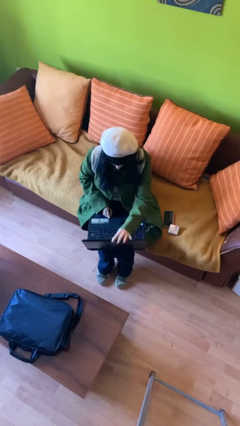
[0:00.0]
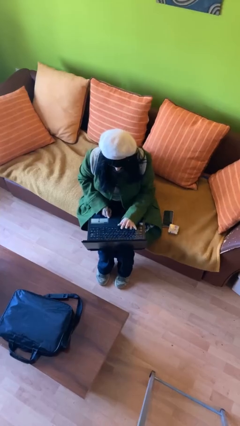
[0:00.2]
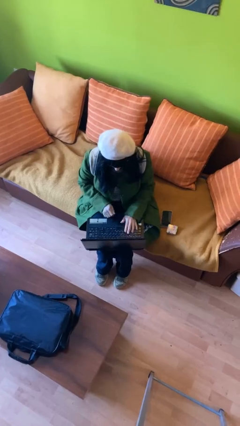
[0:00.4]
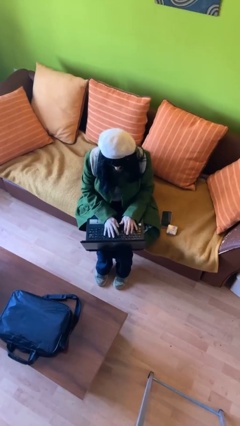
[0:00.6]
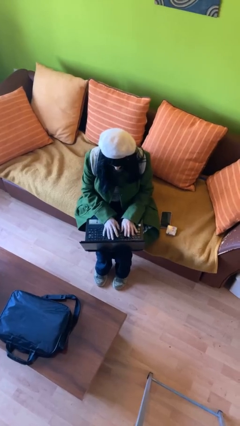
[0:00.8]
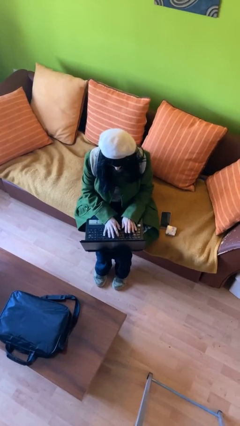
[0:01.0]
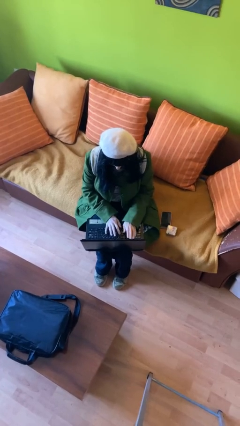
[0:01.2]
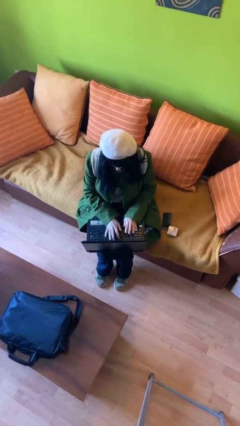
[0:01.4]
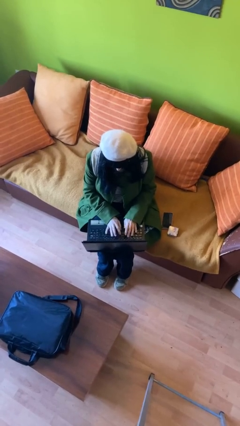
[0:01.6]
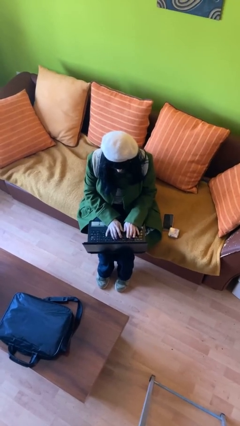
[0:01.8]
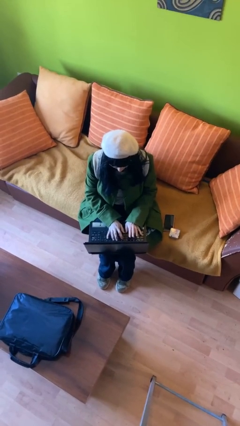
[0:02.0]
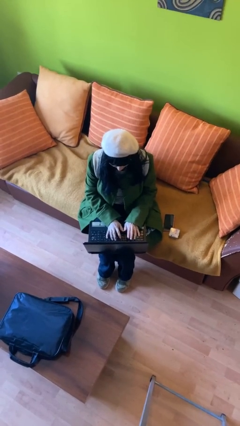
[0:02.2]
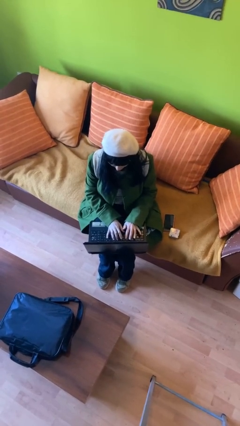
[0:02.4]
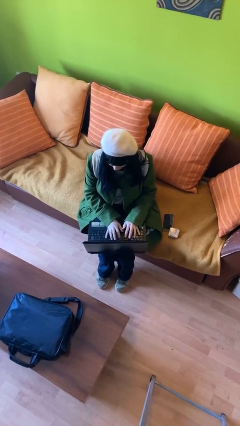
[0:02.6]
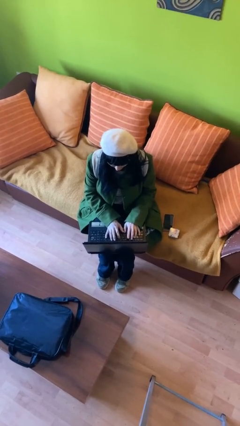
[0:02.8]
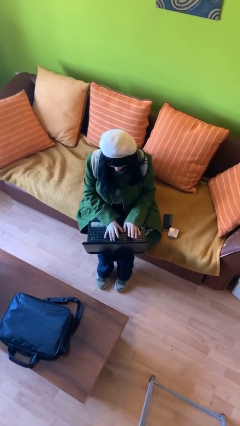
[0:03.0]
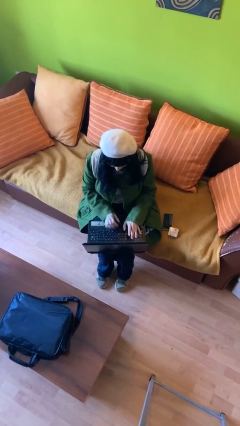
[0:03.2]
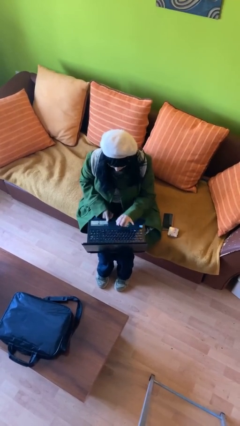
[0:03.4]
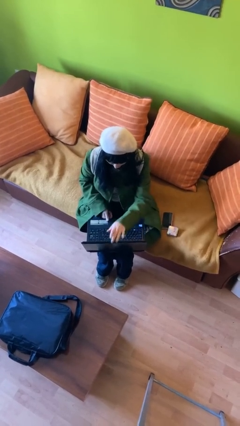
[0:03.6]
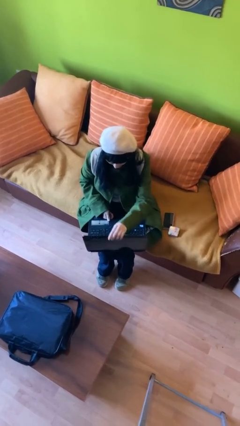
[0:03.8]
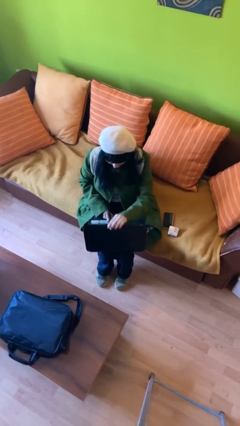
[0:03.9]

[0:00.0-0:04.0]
person interacts with laptop

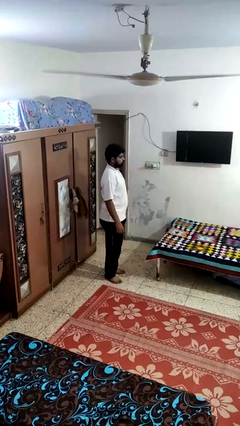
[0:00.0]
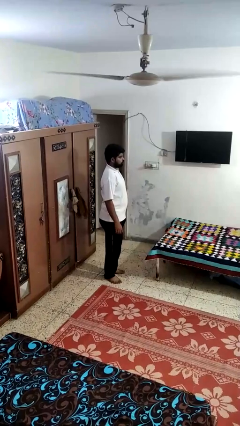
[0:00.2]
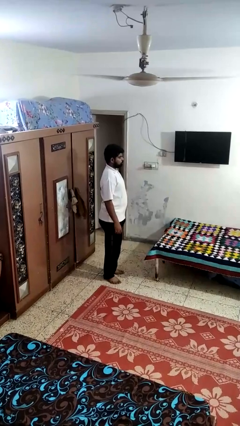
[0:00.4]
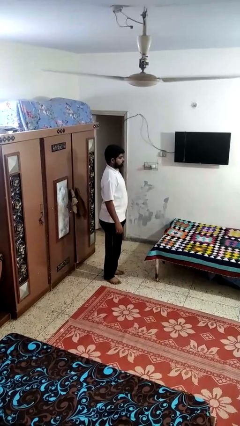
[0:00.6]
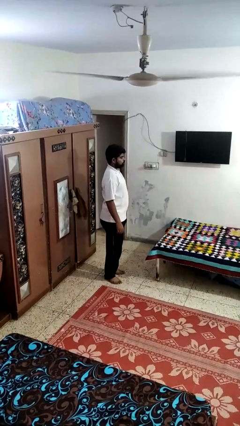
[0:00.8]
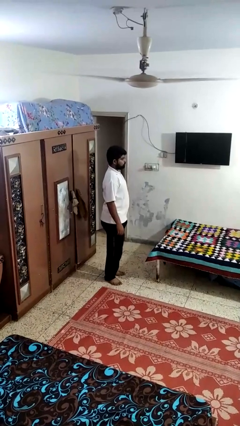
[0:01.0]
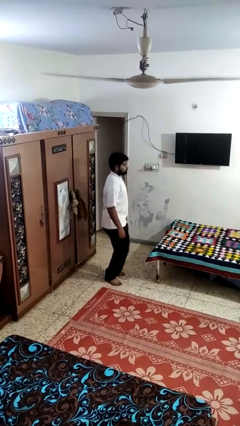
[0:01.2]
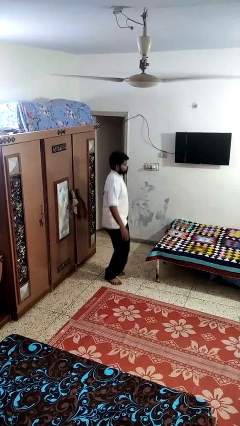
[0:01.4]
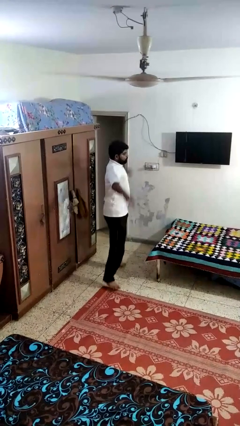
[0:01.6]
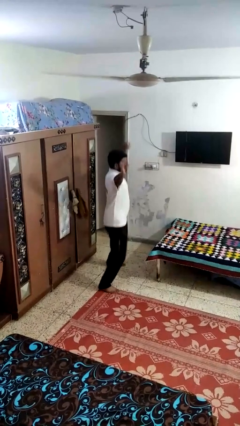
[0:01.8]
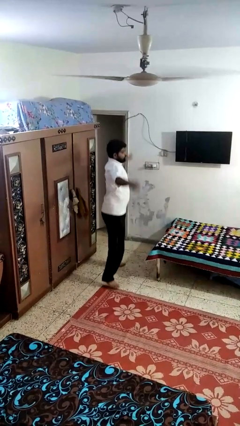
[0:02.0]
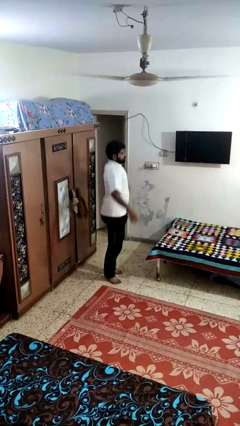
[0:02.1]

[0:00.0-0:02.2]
person exercises with jumping jacks

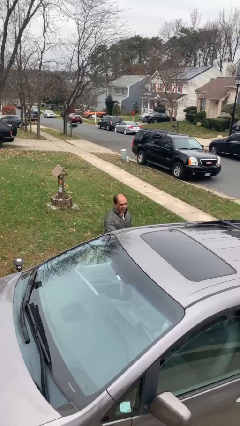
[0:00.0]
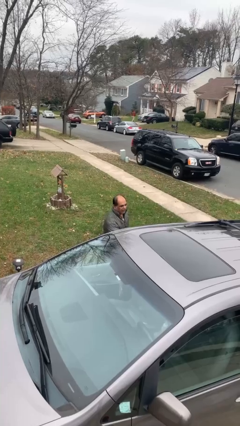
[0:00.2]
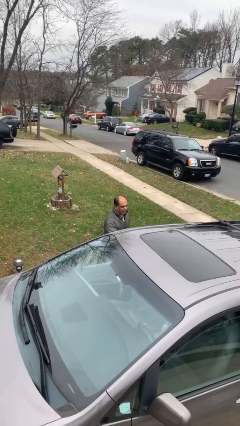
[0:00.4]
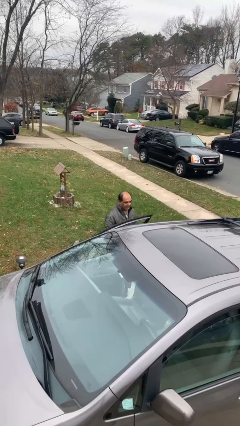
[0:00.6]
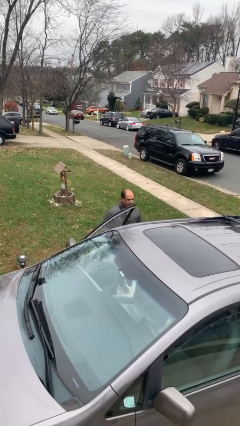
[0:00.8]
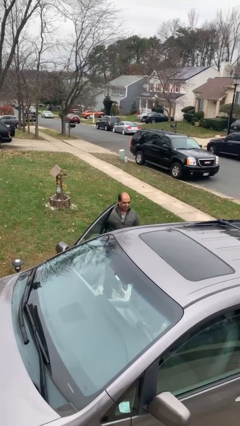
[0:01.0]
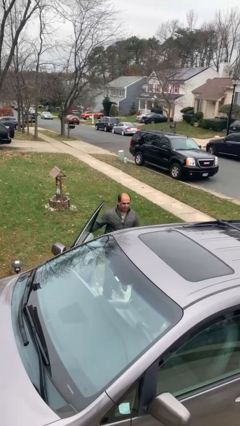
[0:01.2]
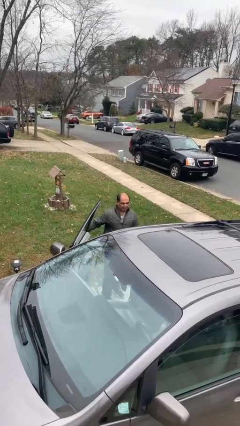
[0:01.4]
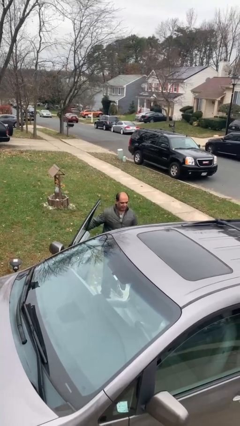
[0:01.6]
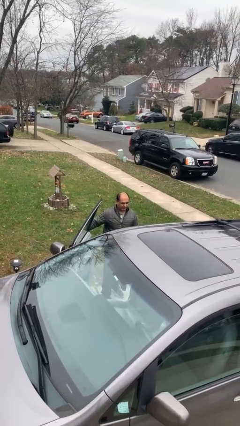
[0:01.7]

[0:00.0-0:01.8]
person opens car door

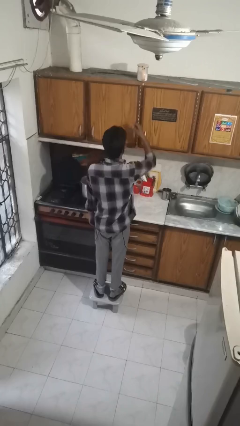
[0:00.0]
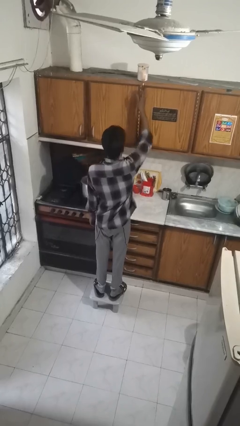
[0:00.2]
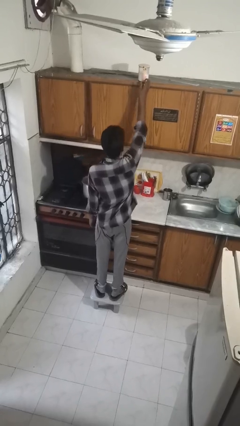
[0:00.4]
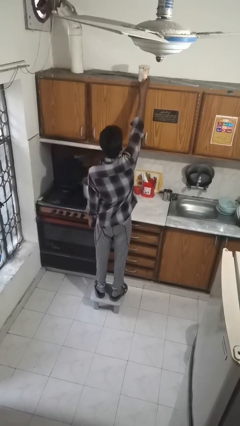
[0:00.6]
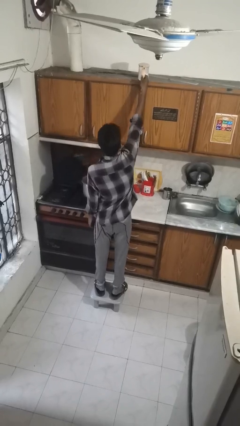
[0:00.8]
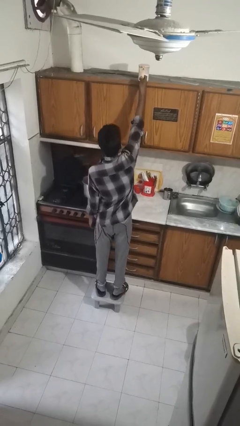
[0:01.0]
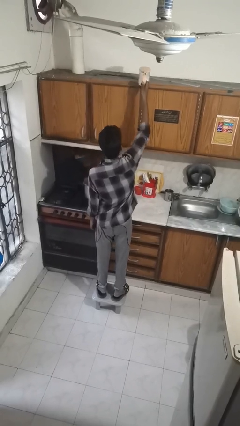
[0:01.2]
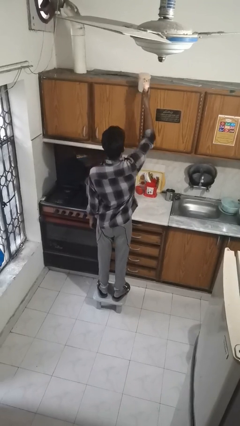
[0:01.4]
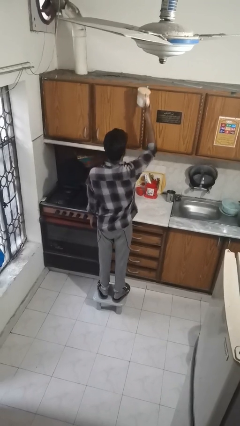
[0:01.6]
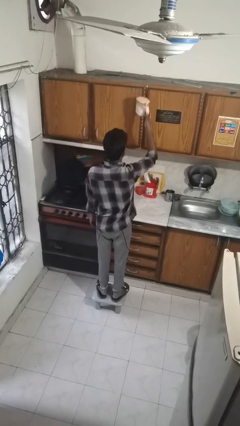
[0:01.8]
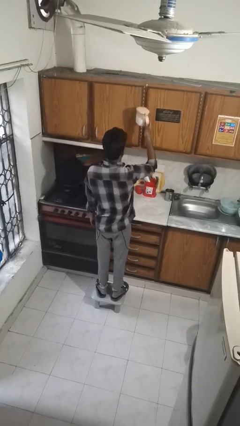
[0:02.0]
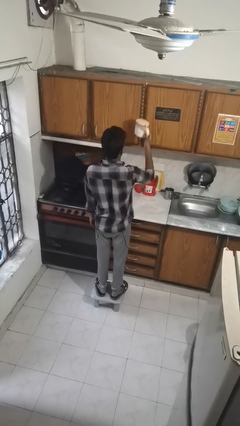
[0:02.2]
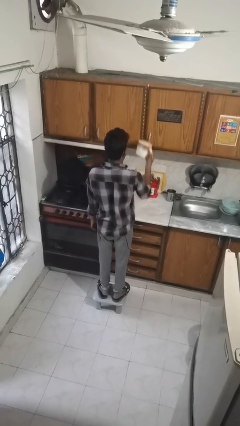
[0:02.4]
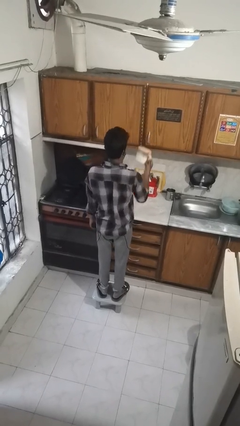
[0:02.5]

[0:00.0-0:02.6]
person picks up object from shelf

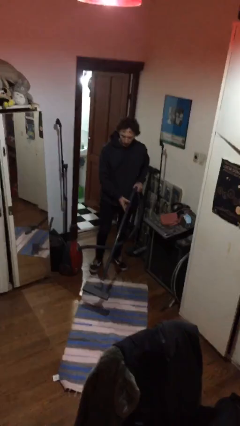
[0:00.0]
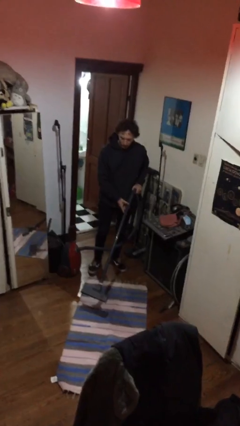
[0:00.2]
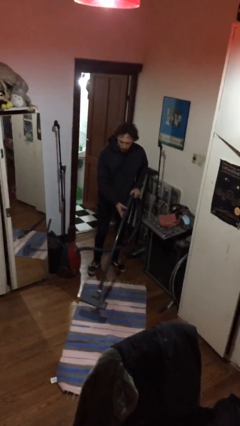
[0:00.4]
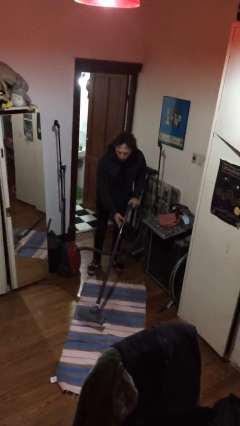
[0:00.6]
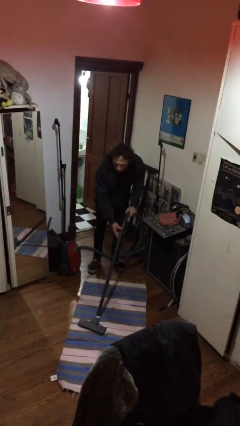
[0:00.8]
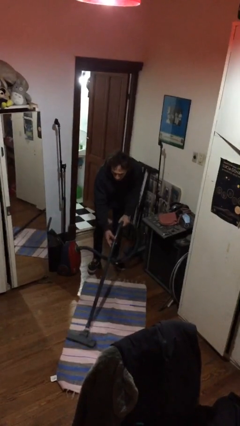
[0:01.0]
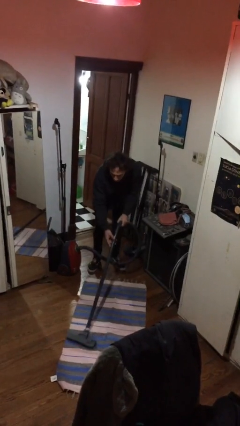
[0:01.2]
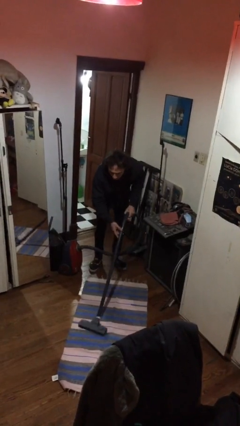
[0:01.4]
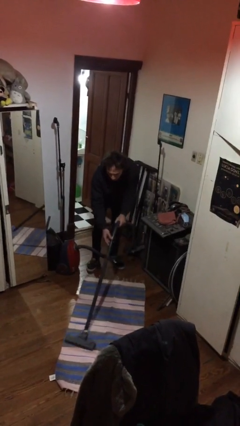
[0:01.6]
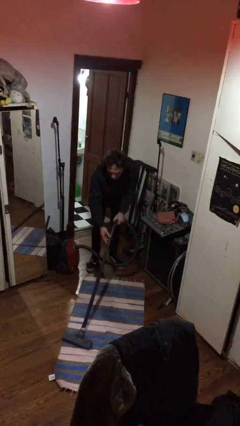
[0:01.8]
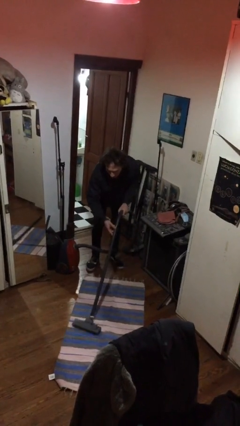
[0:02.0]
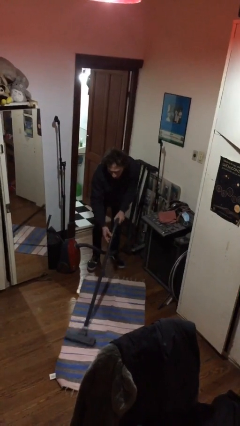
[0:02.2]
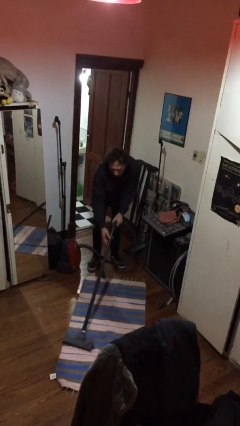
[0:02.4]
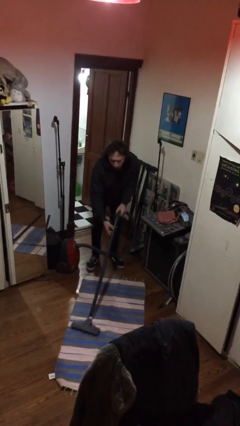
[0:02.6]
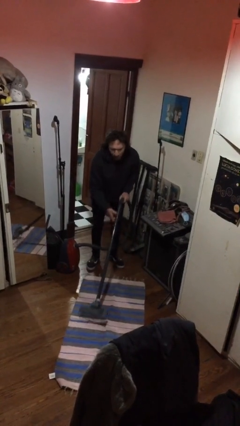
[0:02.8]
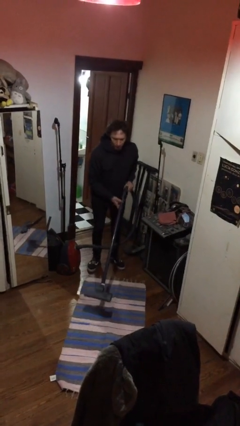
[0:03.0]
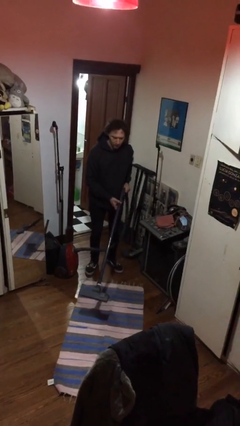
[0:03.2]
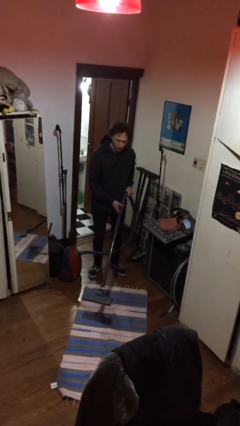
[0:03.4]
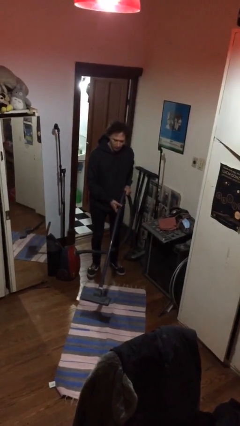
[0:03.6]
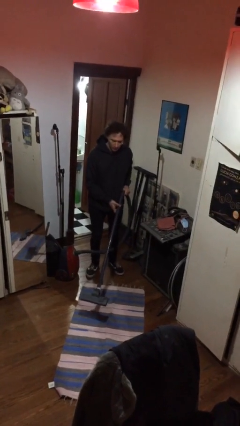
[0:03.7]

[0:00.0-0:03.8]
person vacuums carpet

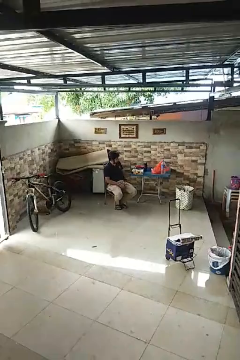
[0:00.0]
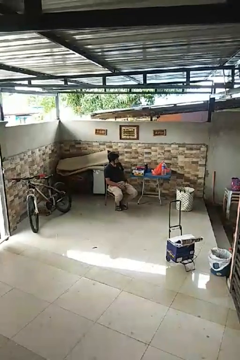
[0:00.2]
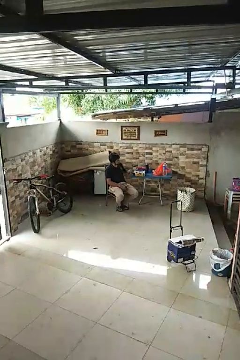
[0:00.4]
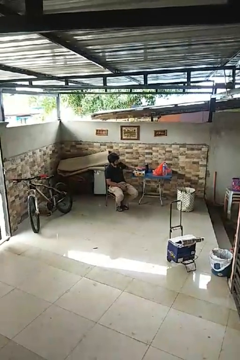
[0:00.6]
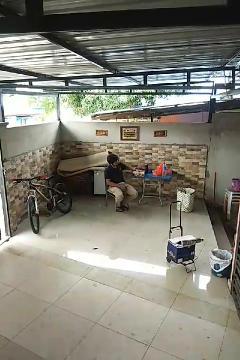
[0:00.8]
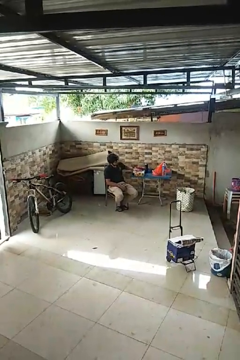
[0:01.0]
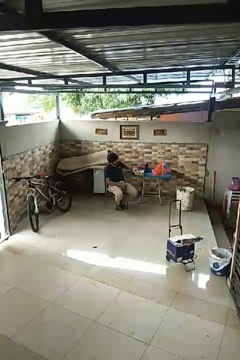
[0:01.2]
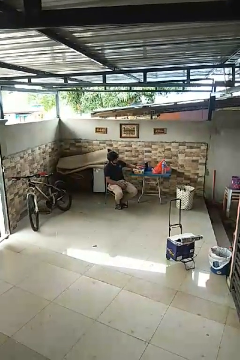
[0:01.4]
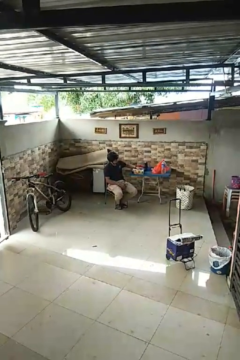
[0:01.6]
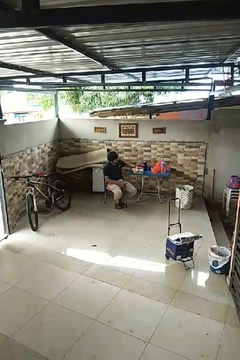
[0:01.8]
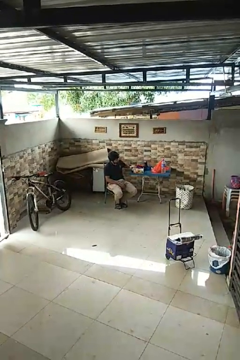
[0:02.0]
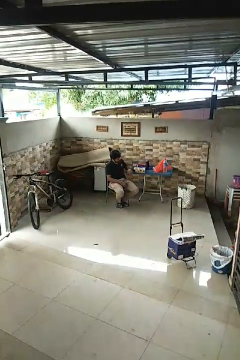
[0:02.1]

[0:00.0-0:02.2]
person taps object with finger

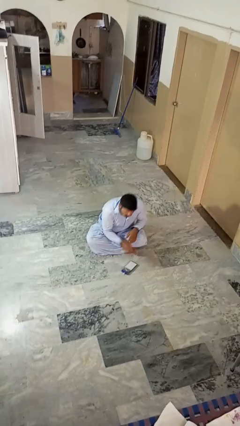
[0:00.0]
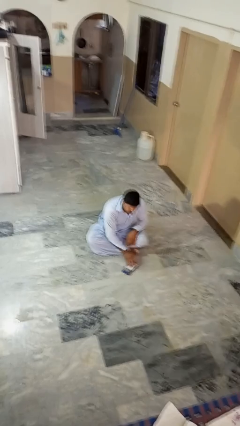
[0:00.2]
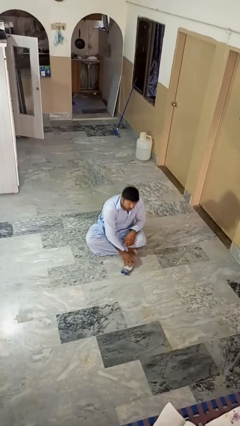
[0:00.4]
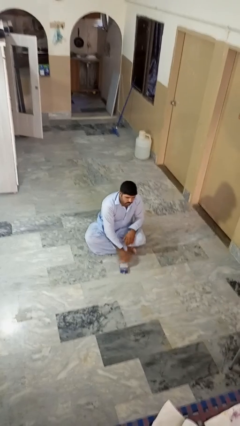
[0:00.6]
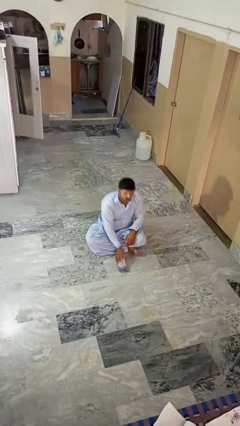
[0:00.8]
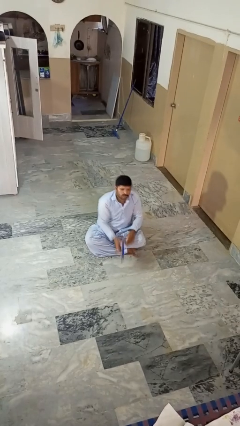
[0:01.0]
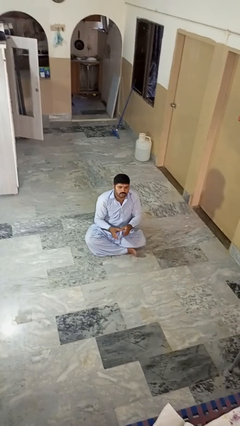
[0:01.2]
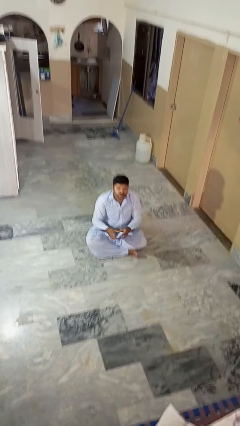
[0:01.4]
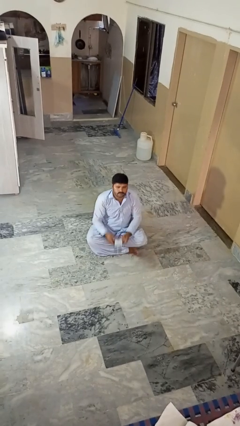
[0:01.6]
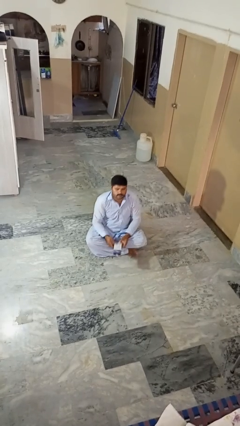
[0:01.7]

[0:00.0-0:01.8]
person picks up object from floor
